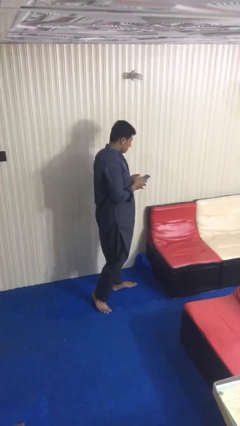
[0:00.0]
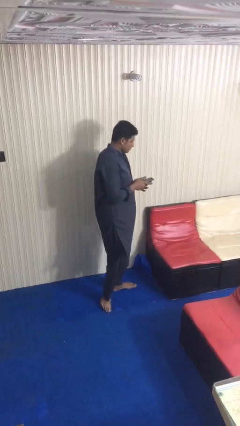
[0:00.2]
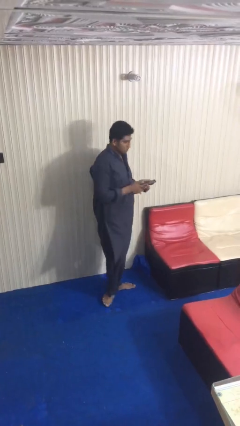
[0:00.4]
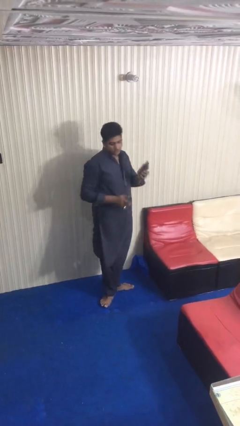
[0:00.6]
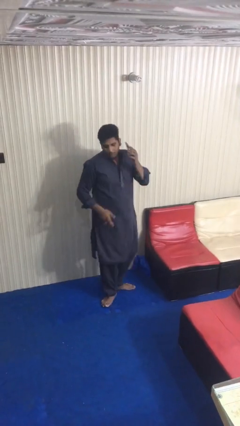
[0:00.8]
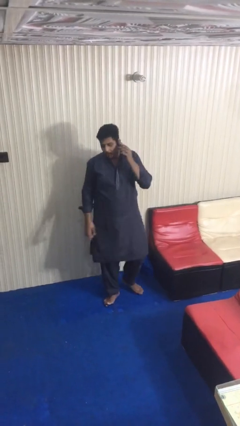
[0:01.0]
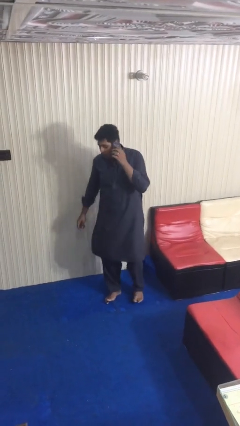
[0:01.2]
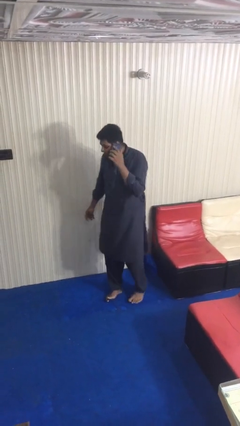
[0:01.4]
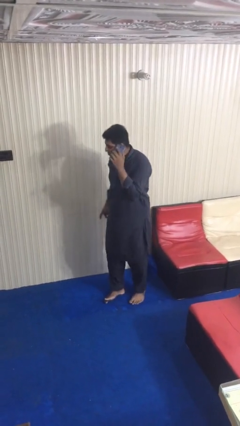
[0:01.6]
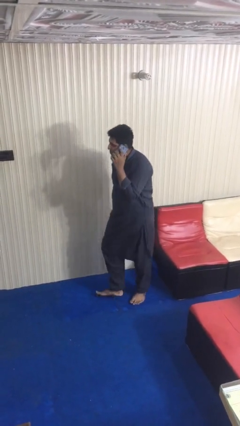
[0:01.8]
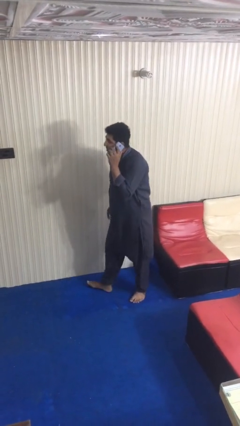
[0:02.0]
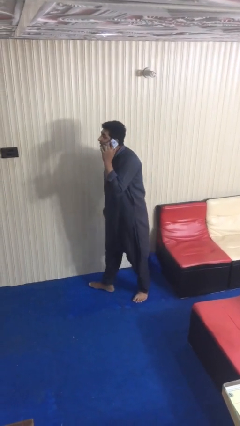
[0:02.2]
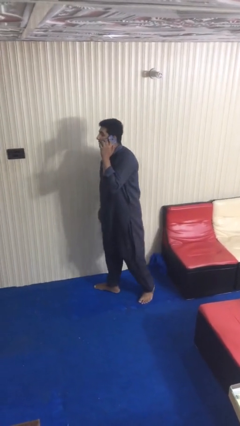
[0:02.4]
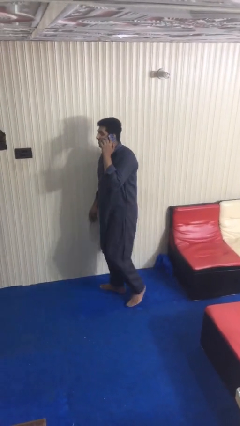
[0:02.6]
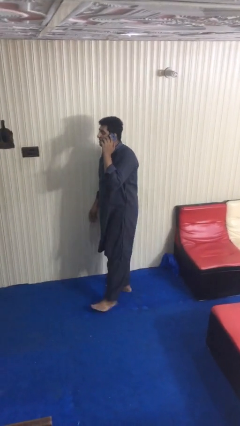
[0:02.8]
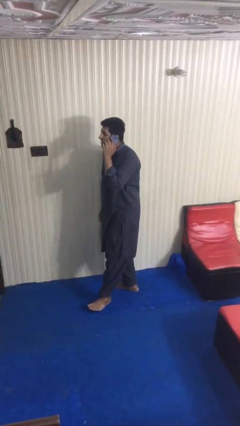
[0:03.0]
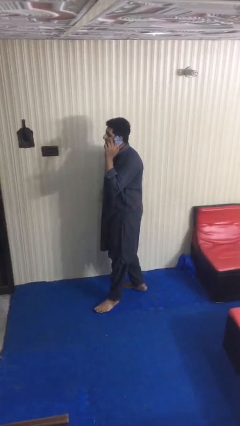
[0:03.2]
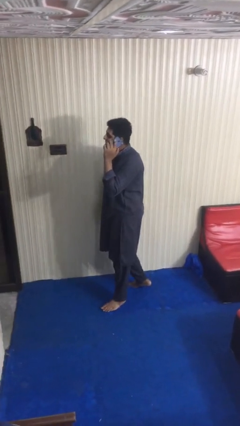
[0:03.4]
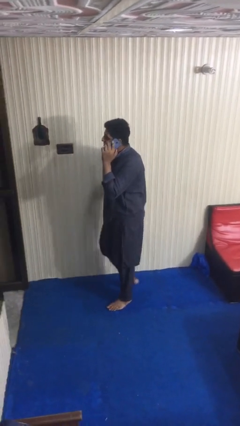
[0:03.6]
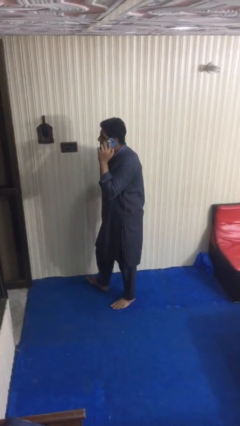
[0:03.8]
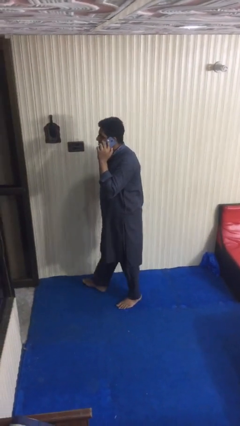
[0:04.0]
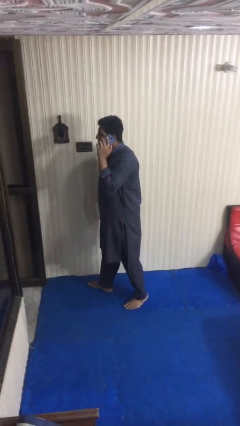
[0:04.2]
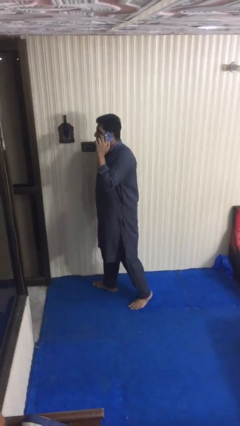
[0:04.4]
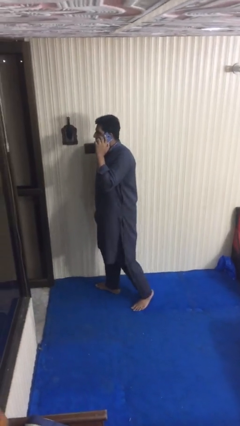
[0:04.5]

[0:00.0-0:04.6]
person talks on phone

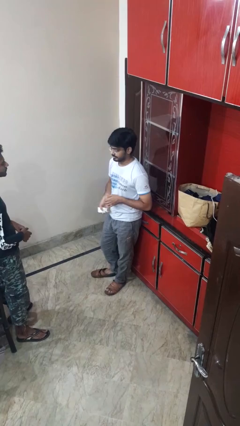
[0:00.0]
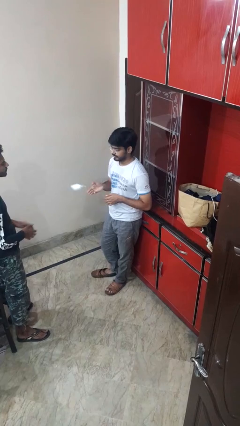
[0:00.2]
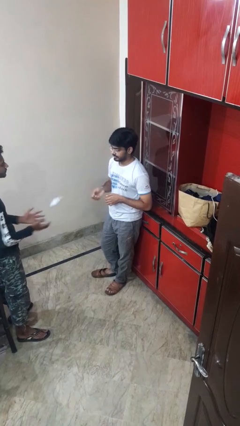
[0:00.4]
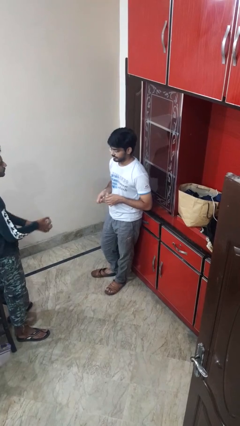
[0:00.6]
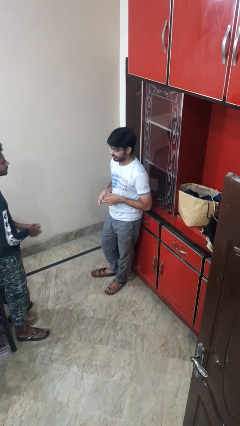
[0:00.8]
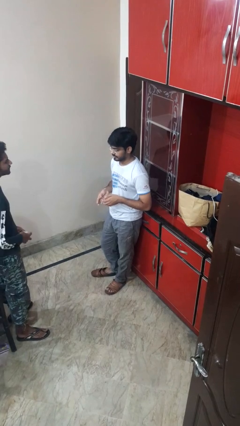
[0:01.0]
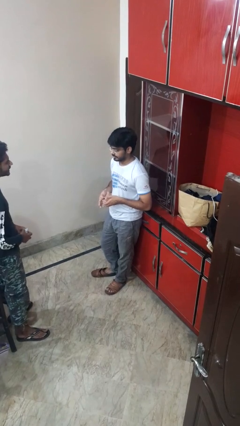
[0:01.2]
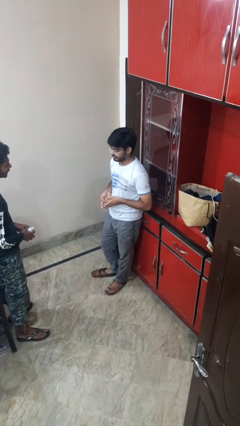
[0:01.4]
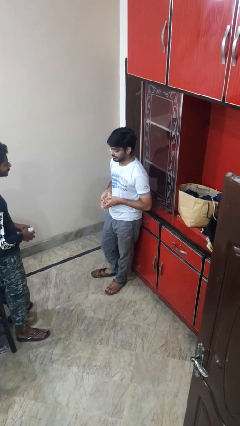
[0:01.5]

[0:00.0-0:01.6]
person throws object to person

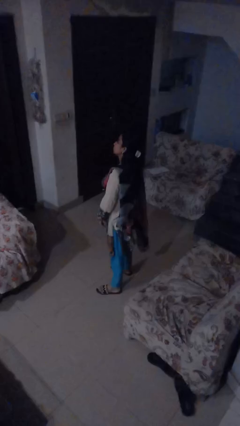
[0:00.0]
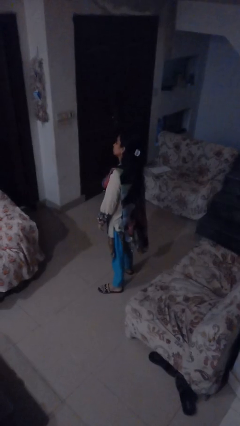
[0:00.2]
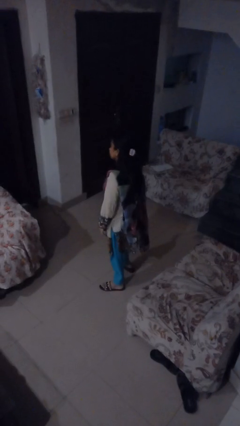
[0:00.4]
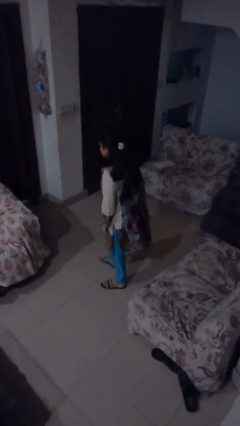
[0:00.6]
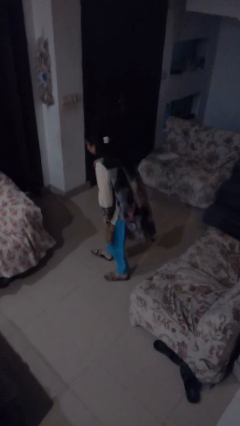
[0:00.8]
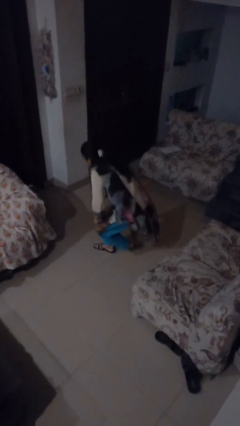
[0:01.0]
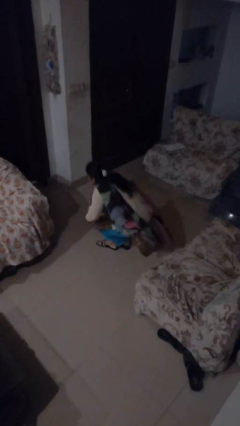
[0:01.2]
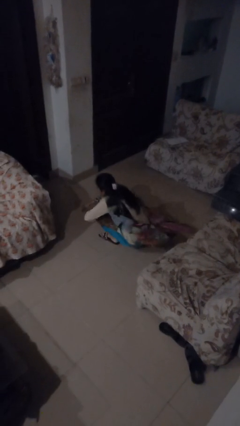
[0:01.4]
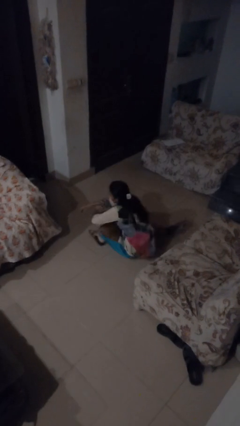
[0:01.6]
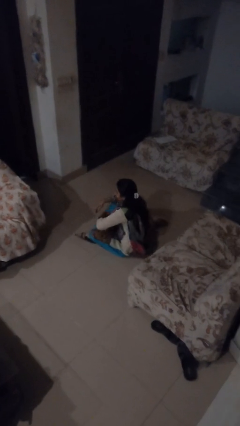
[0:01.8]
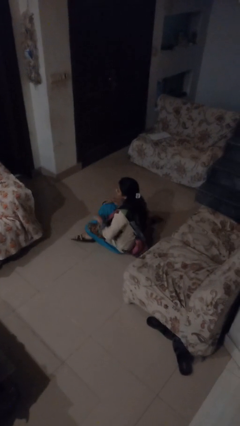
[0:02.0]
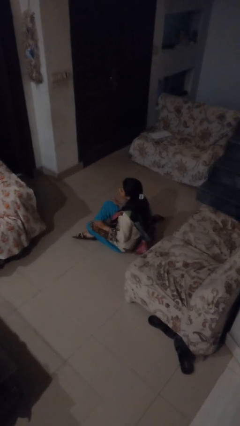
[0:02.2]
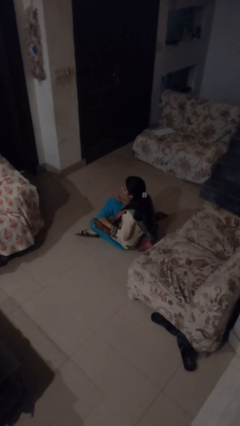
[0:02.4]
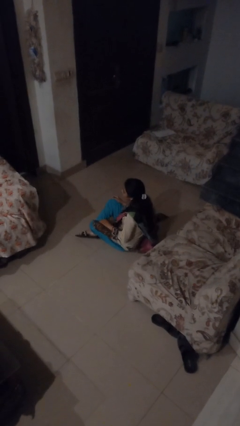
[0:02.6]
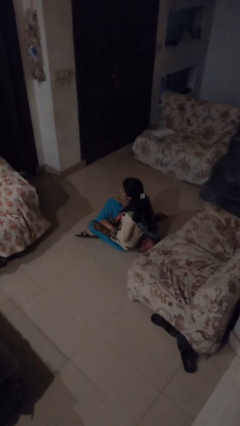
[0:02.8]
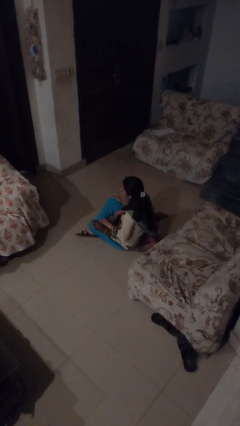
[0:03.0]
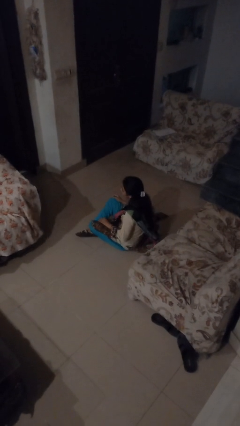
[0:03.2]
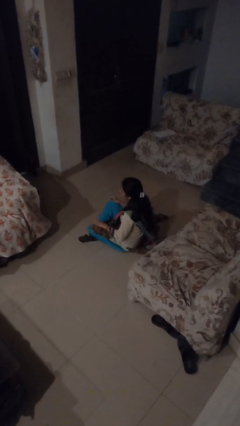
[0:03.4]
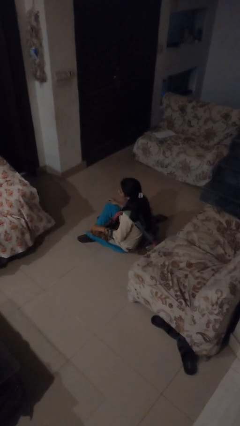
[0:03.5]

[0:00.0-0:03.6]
person sits crisscross

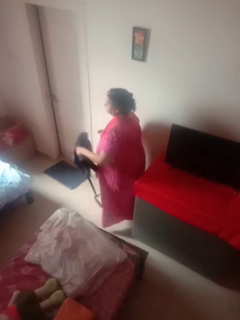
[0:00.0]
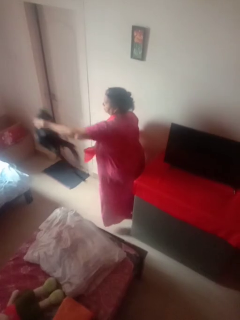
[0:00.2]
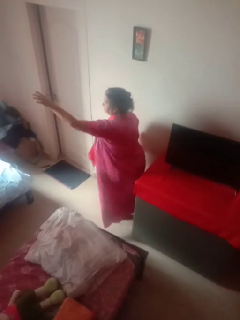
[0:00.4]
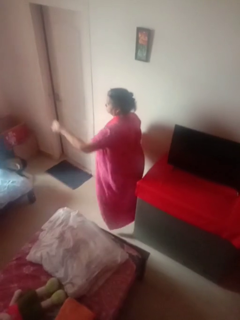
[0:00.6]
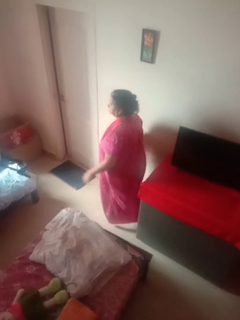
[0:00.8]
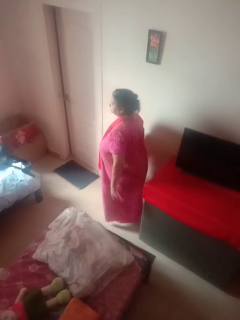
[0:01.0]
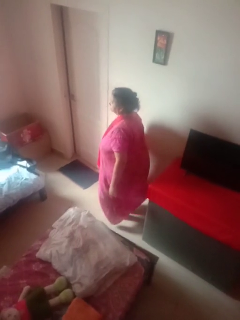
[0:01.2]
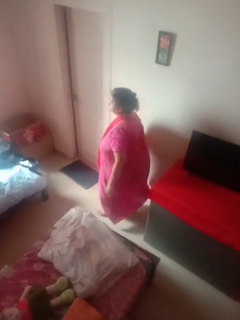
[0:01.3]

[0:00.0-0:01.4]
person throws object on bed

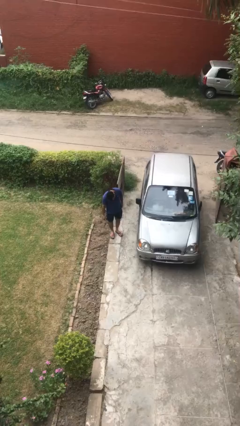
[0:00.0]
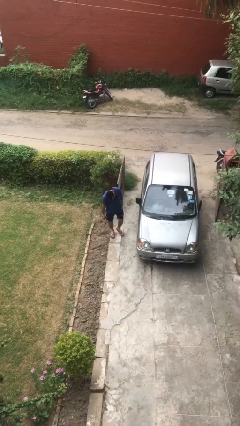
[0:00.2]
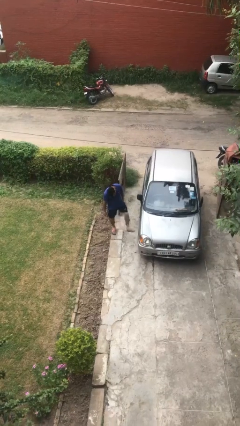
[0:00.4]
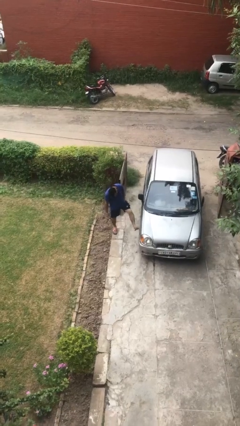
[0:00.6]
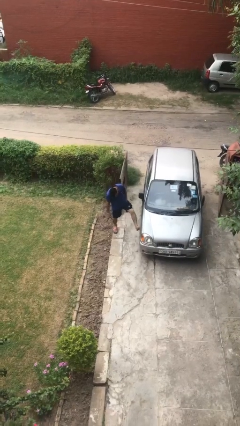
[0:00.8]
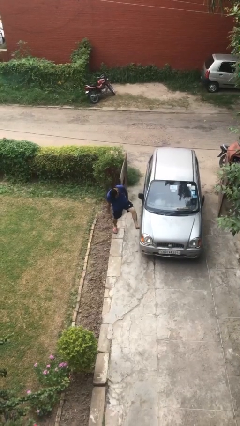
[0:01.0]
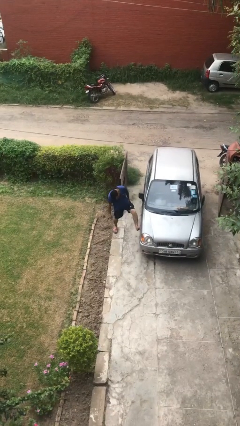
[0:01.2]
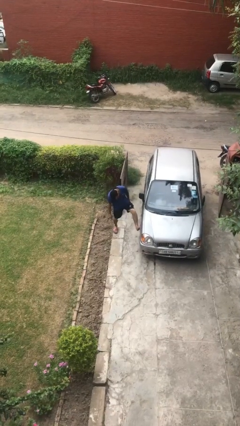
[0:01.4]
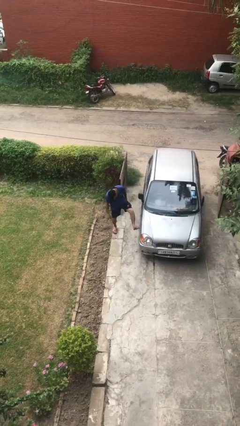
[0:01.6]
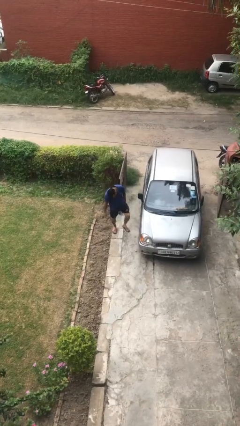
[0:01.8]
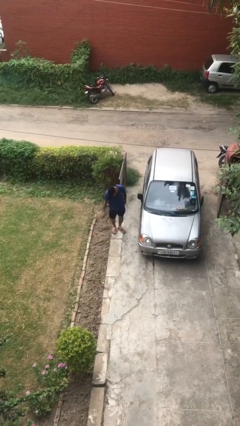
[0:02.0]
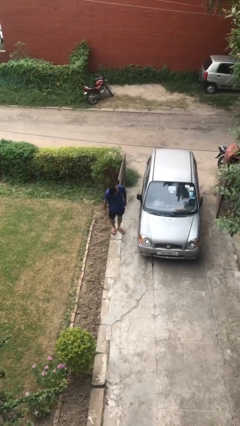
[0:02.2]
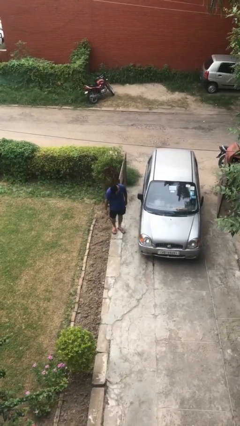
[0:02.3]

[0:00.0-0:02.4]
person kicks car tires

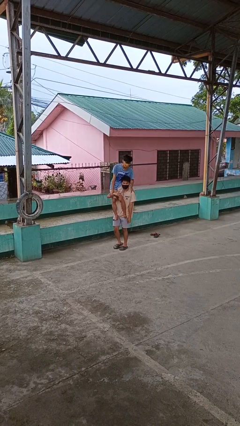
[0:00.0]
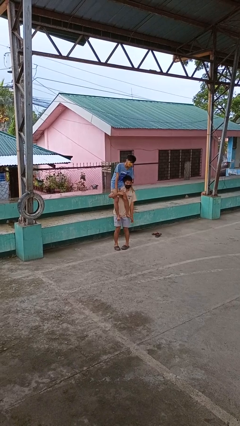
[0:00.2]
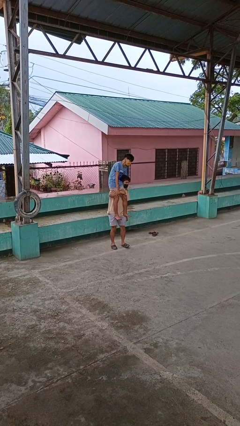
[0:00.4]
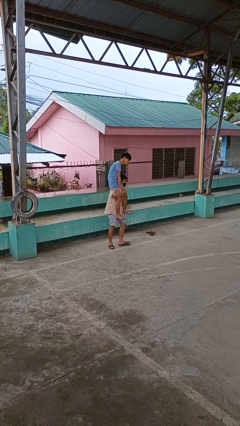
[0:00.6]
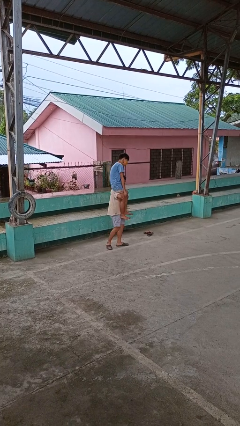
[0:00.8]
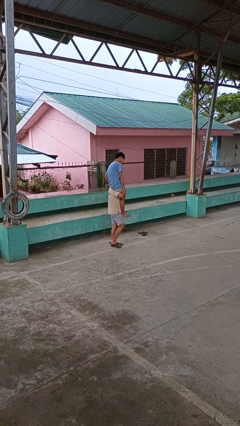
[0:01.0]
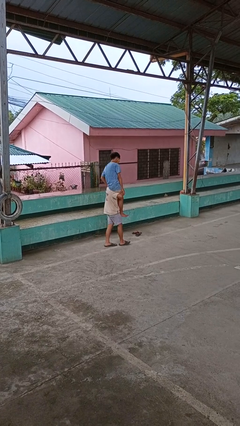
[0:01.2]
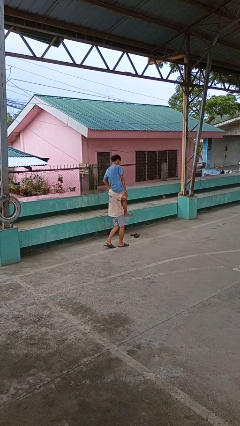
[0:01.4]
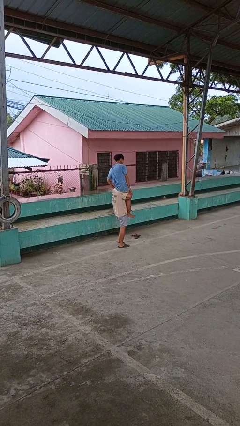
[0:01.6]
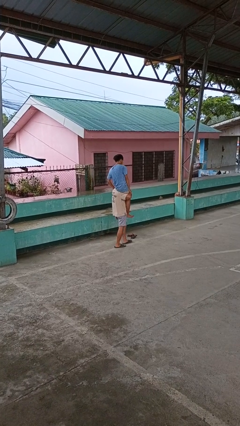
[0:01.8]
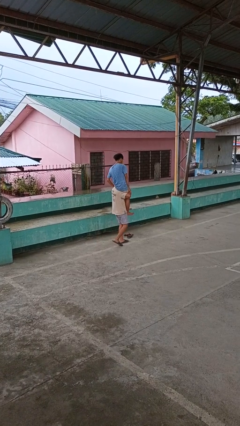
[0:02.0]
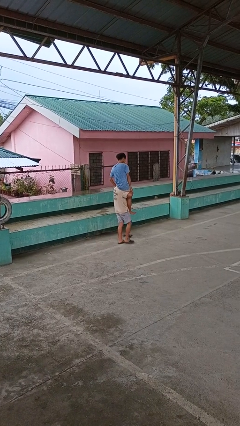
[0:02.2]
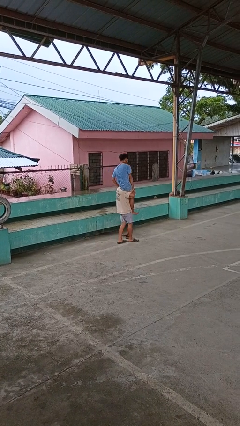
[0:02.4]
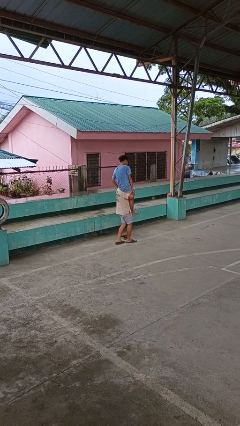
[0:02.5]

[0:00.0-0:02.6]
person carries person on shoulders

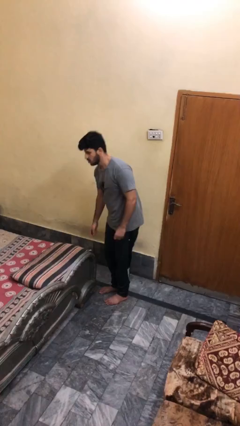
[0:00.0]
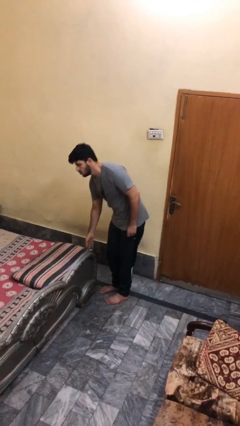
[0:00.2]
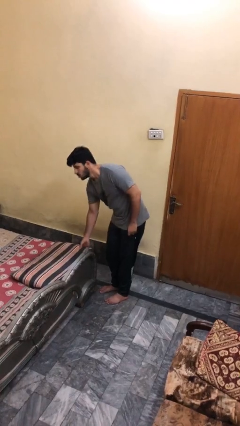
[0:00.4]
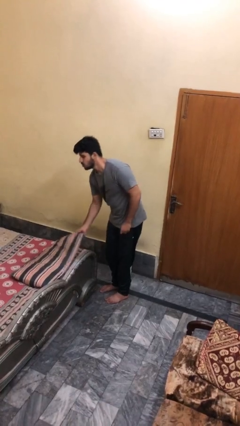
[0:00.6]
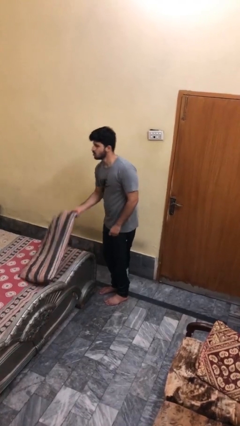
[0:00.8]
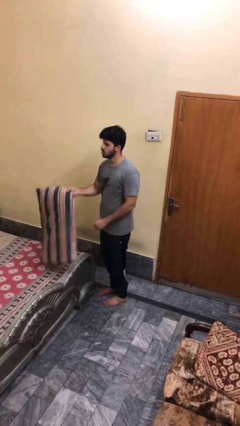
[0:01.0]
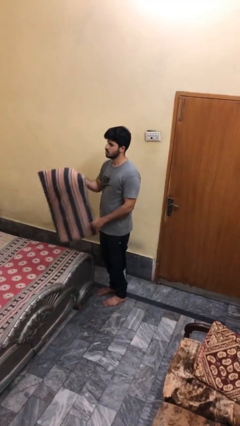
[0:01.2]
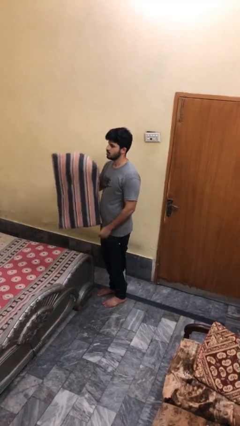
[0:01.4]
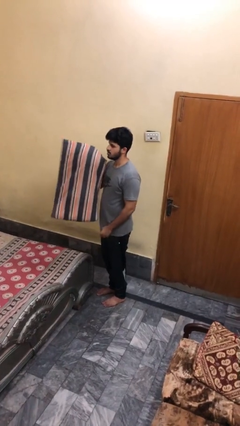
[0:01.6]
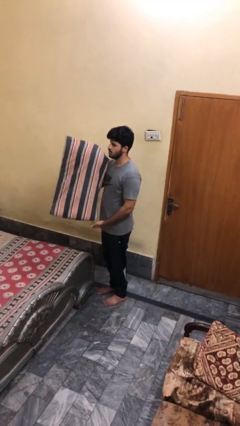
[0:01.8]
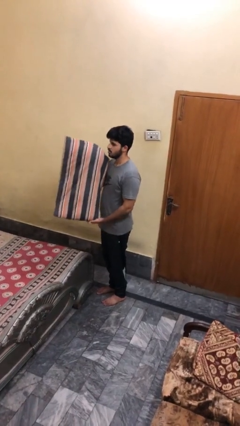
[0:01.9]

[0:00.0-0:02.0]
person picks up object from bed
